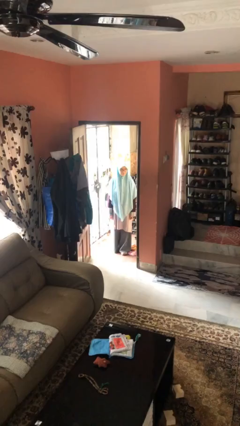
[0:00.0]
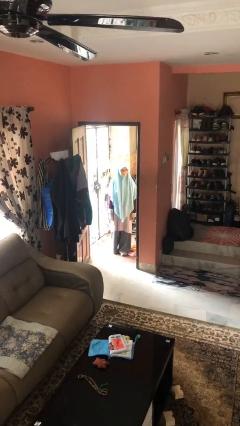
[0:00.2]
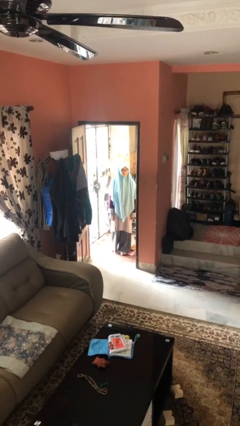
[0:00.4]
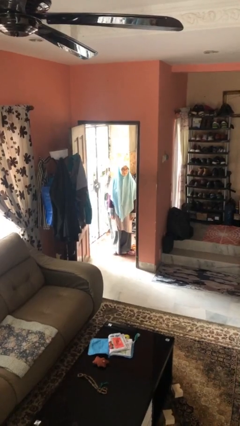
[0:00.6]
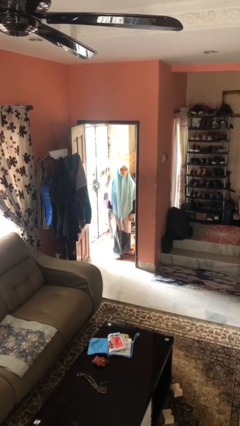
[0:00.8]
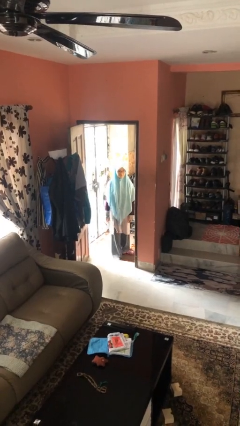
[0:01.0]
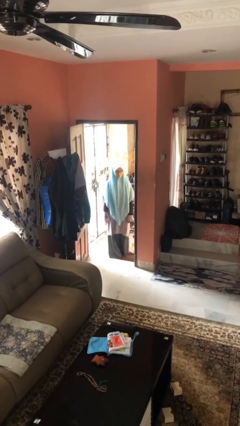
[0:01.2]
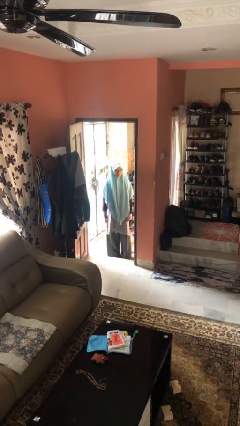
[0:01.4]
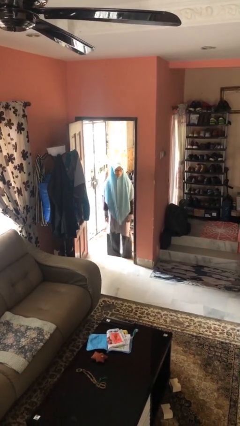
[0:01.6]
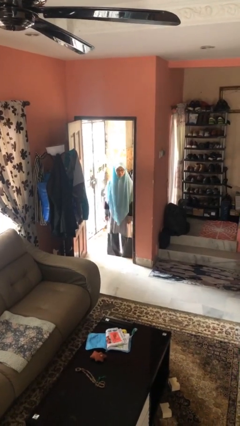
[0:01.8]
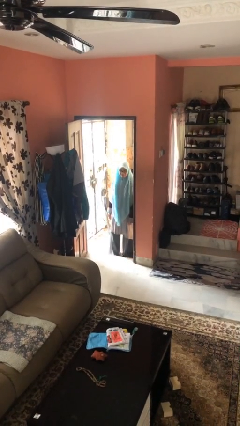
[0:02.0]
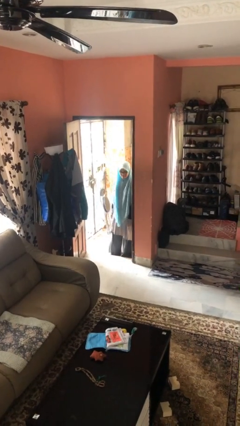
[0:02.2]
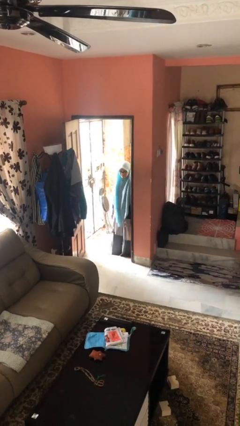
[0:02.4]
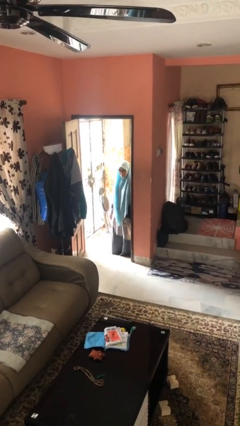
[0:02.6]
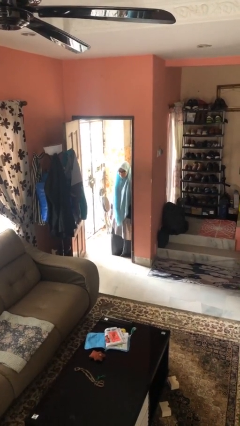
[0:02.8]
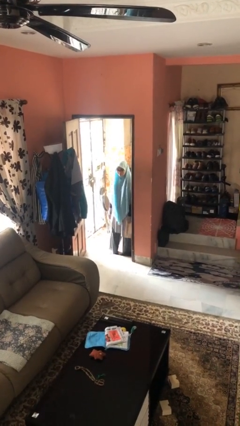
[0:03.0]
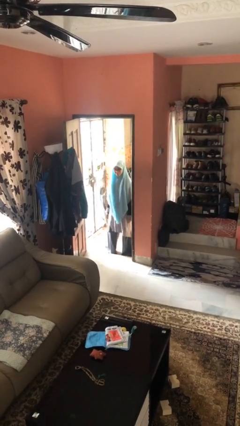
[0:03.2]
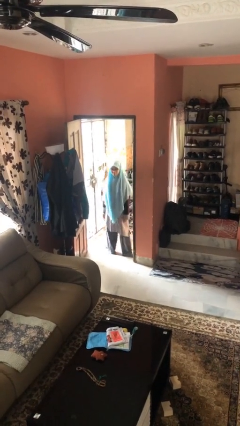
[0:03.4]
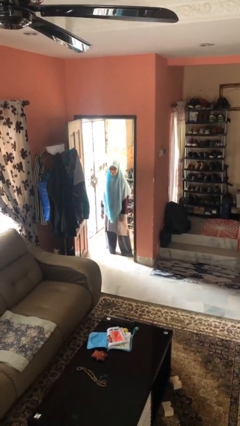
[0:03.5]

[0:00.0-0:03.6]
person bumps into wall

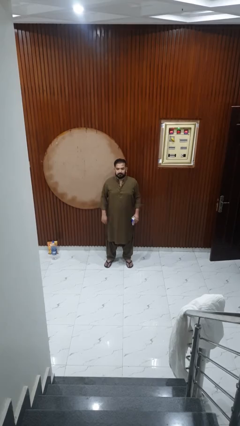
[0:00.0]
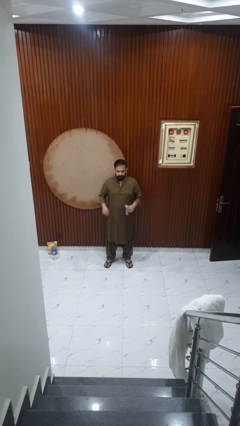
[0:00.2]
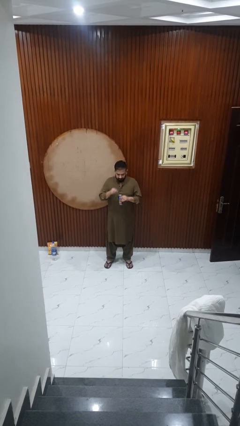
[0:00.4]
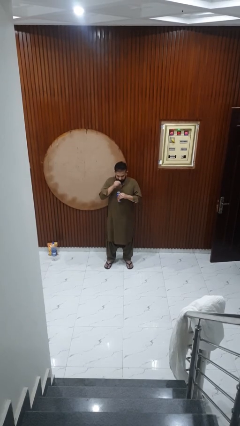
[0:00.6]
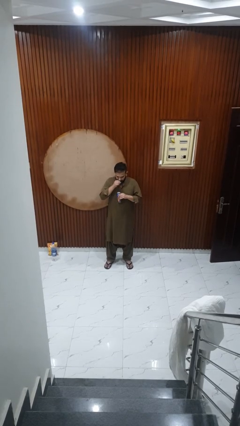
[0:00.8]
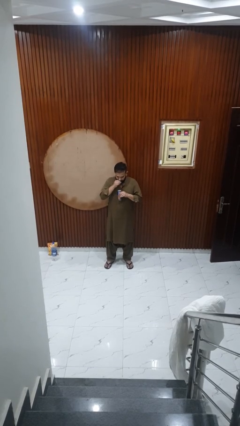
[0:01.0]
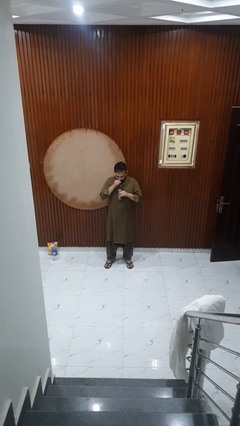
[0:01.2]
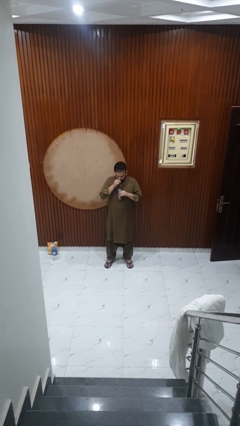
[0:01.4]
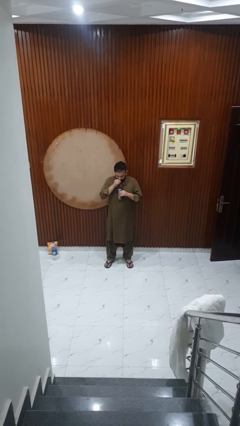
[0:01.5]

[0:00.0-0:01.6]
person drinks from straw

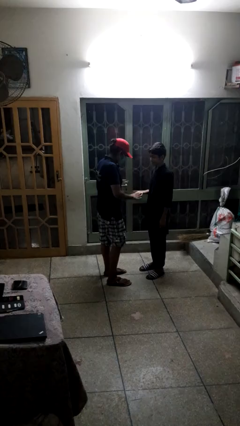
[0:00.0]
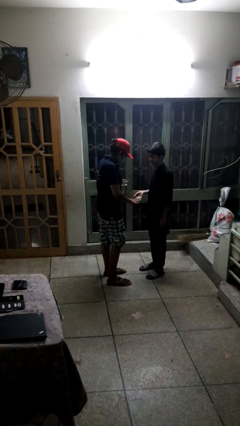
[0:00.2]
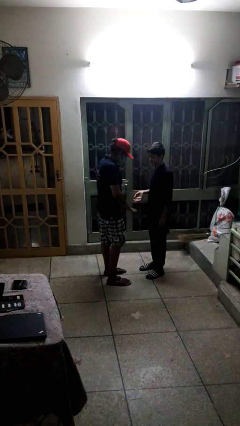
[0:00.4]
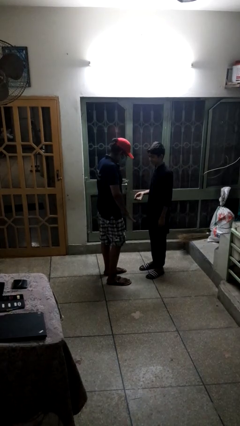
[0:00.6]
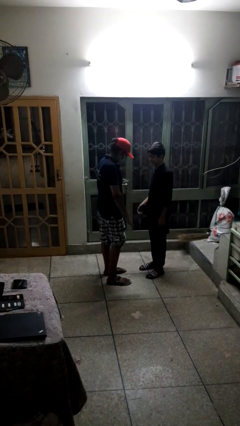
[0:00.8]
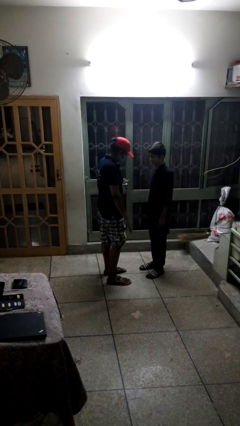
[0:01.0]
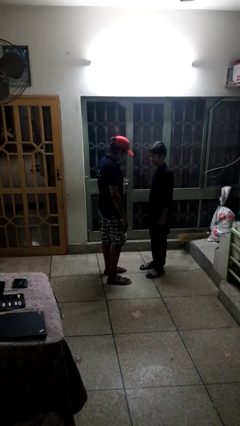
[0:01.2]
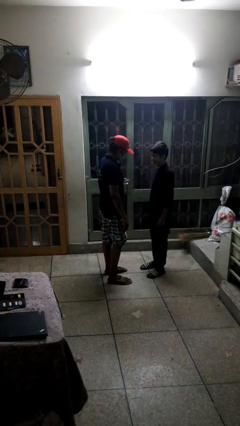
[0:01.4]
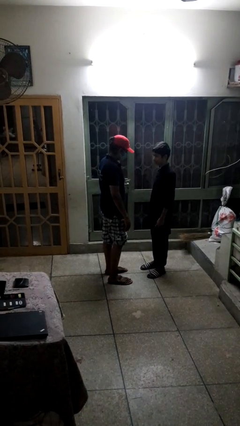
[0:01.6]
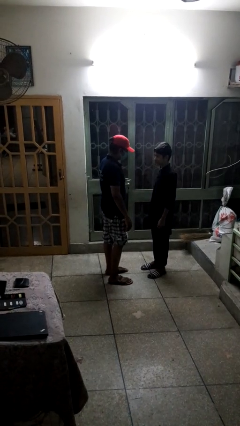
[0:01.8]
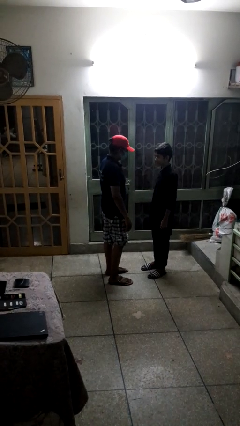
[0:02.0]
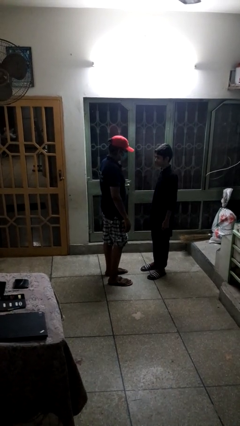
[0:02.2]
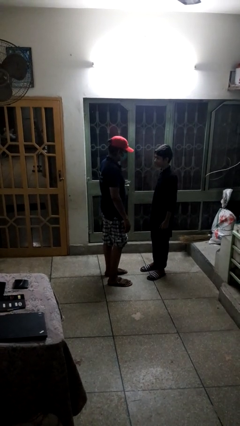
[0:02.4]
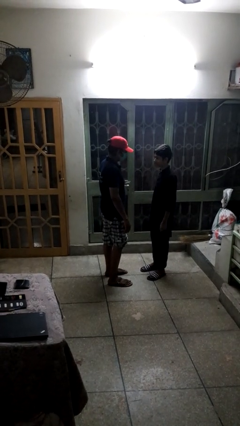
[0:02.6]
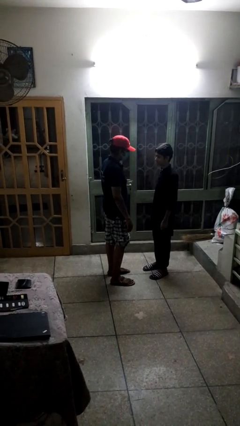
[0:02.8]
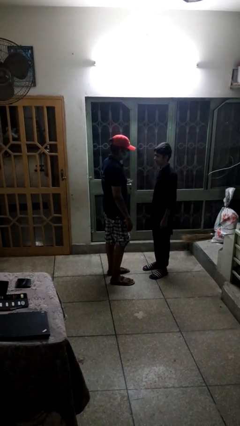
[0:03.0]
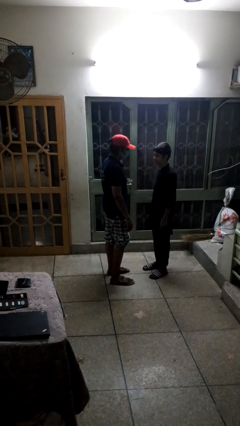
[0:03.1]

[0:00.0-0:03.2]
person highfives hand

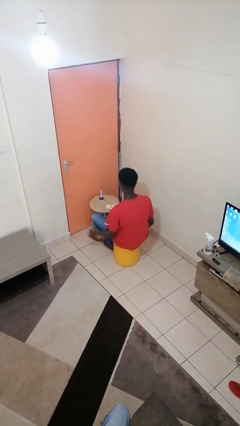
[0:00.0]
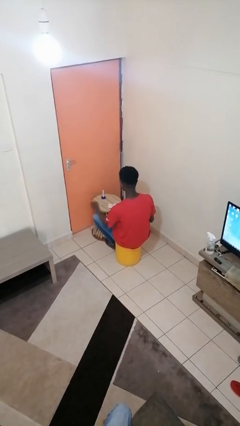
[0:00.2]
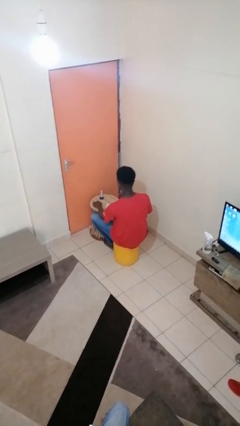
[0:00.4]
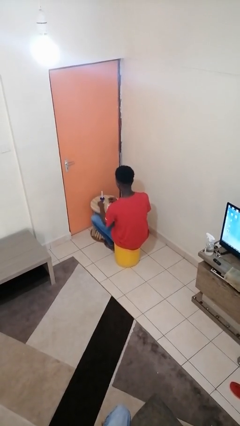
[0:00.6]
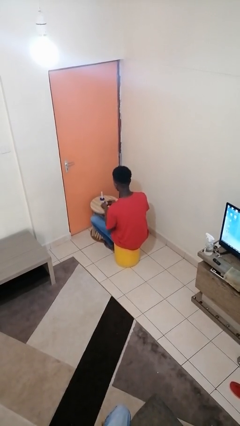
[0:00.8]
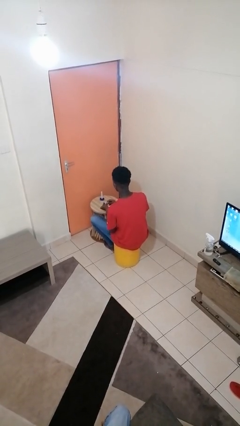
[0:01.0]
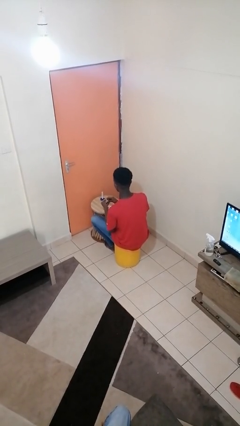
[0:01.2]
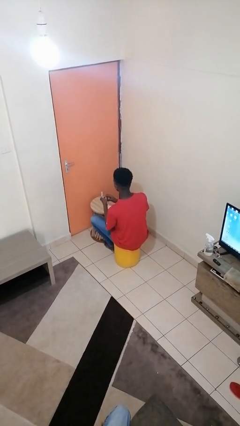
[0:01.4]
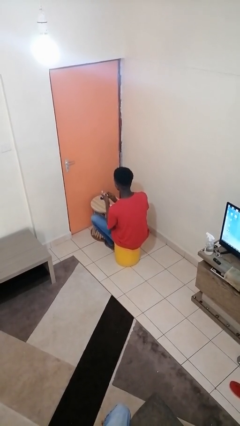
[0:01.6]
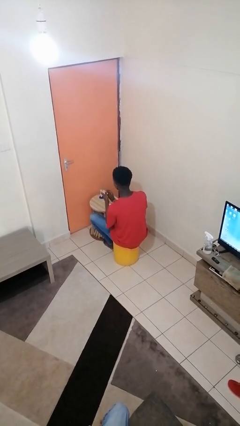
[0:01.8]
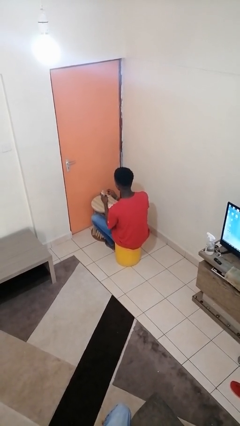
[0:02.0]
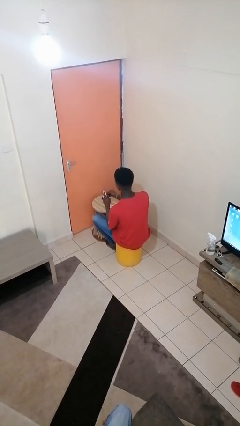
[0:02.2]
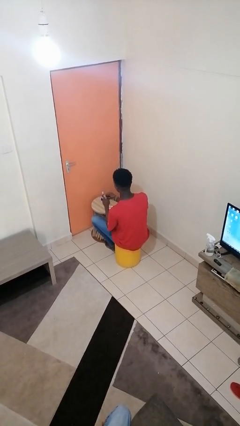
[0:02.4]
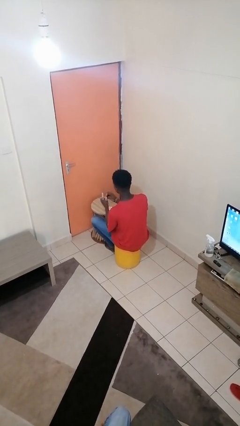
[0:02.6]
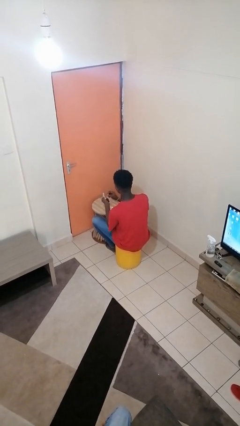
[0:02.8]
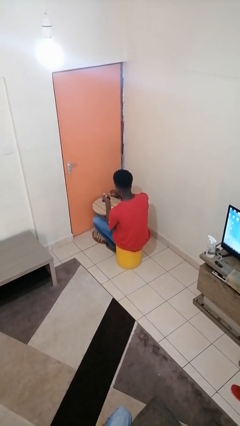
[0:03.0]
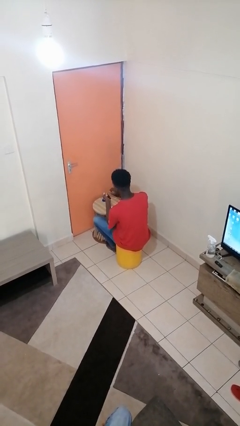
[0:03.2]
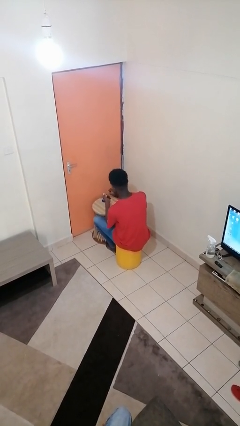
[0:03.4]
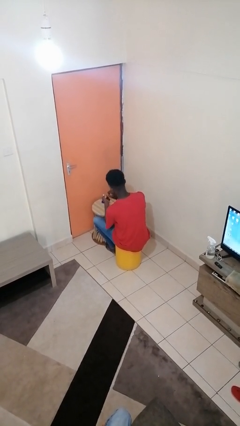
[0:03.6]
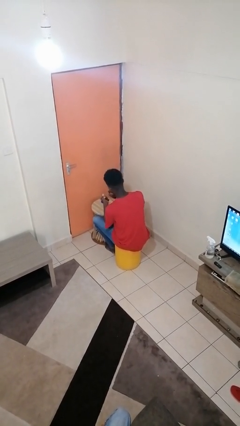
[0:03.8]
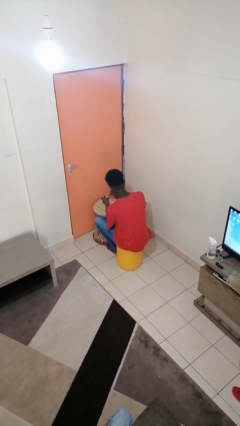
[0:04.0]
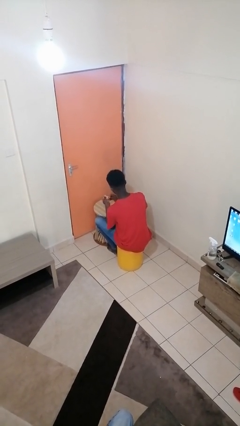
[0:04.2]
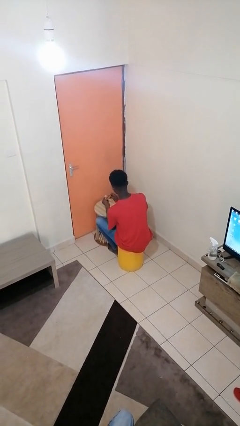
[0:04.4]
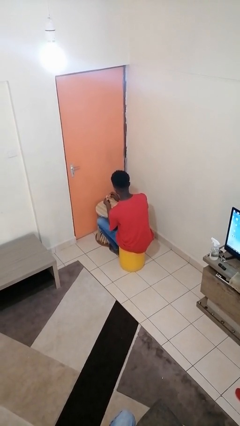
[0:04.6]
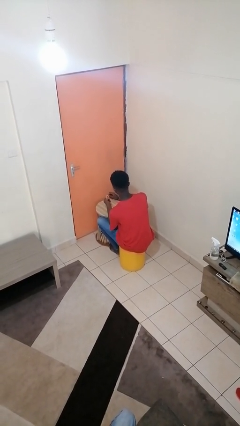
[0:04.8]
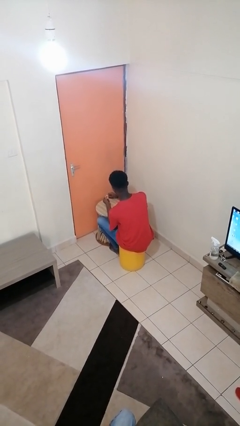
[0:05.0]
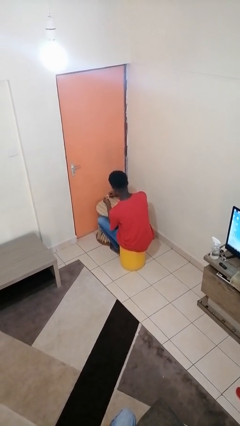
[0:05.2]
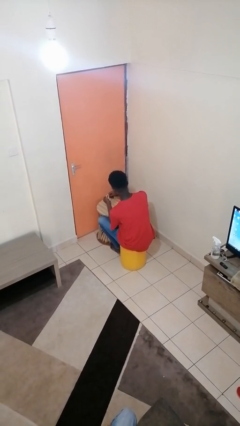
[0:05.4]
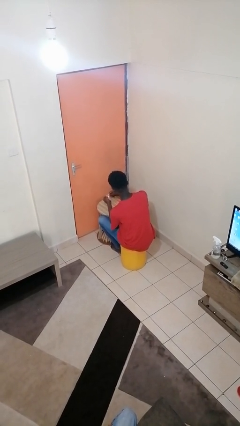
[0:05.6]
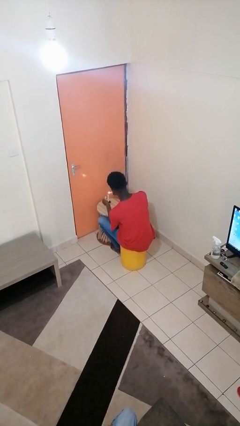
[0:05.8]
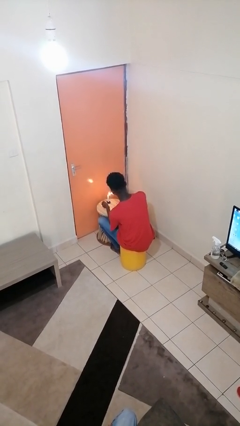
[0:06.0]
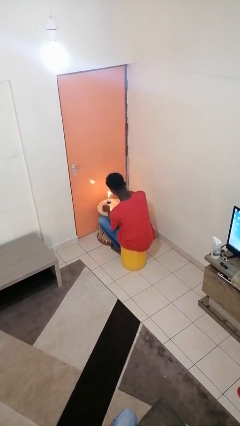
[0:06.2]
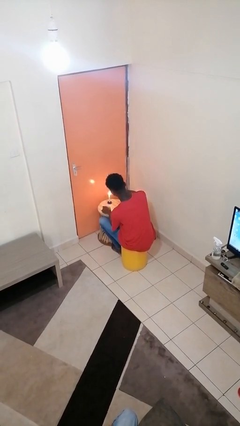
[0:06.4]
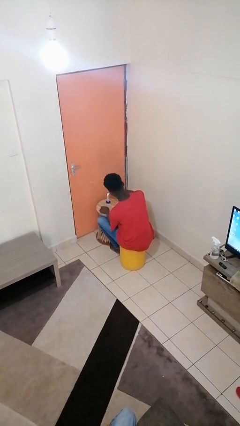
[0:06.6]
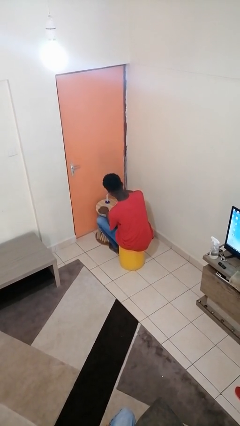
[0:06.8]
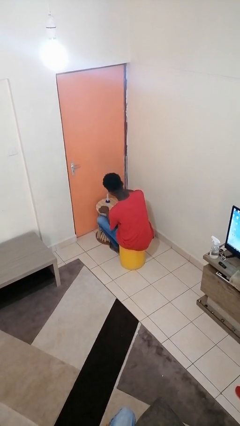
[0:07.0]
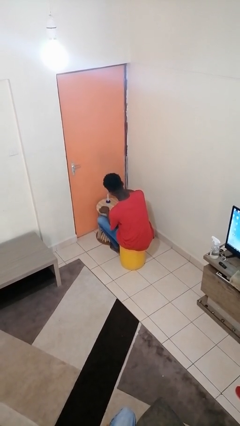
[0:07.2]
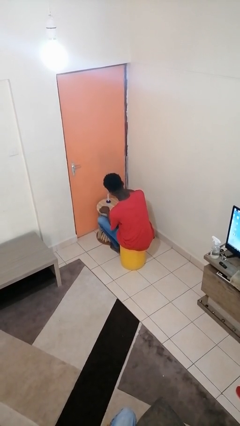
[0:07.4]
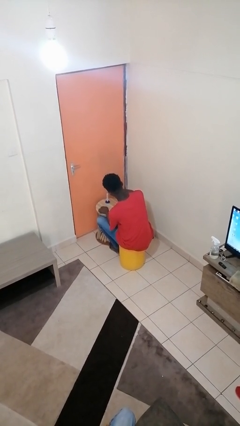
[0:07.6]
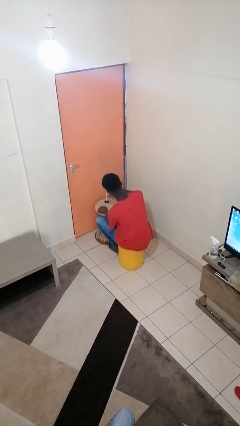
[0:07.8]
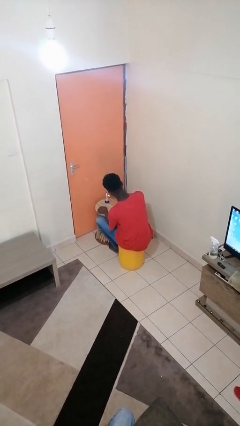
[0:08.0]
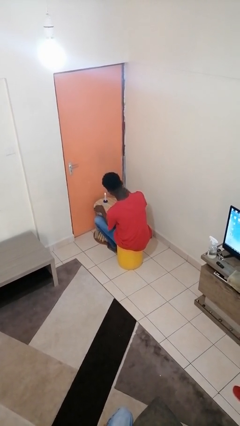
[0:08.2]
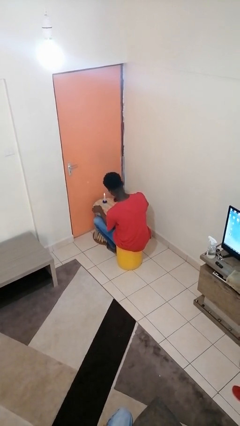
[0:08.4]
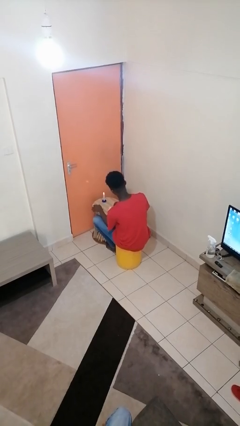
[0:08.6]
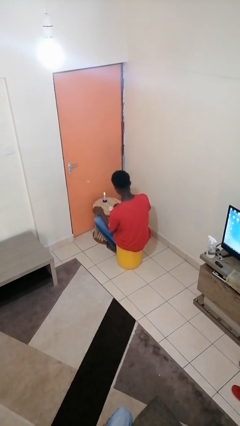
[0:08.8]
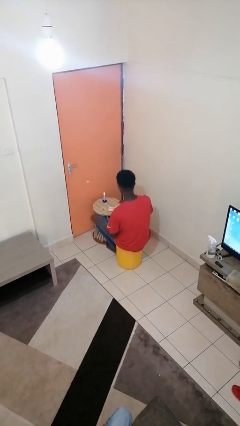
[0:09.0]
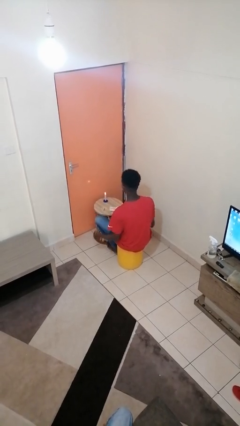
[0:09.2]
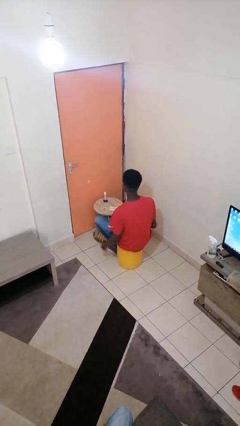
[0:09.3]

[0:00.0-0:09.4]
person lights candle

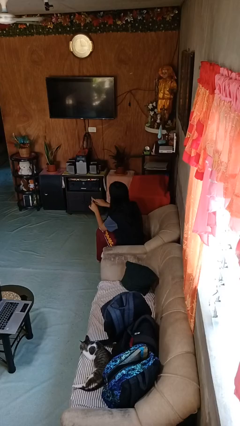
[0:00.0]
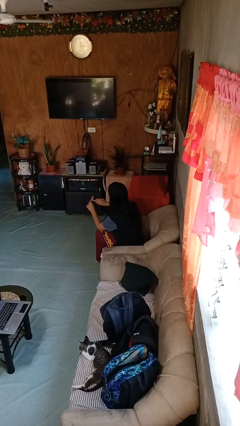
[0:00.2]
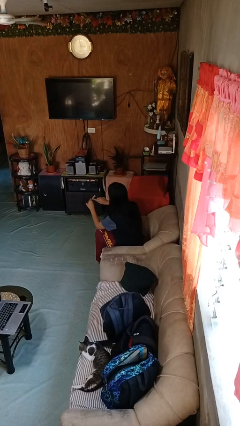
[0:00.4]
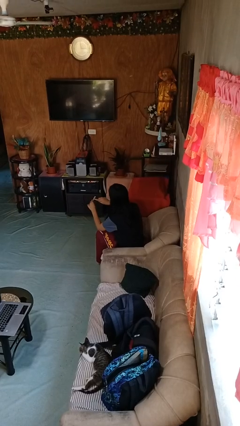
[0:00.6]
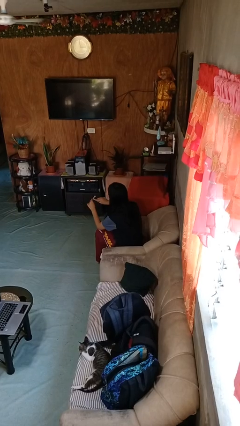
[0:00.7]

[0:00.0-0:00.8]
person files fingernails
